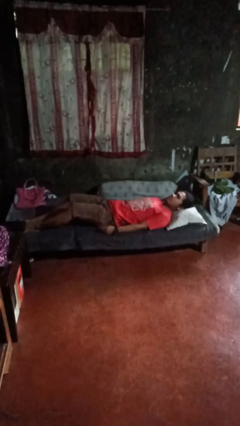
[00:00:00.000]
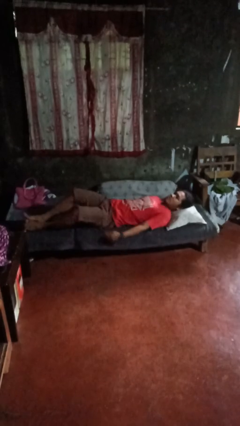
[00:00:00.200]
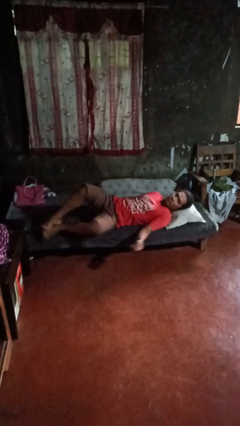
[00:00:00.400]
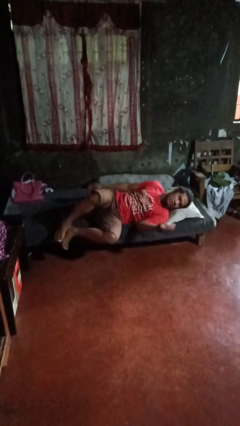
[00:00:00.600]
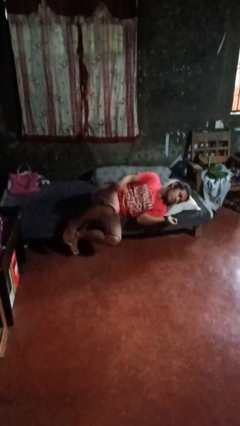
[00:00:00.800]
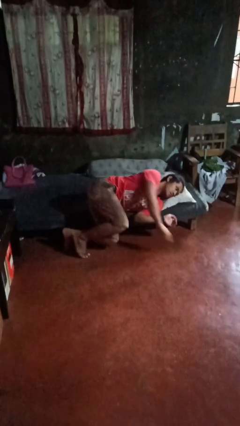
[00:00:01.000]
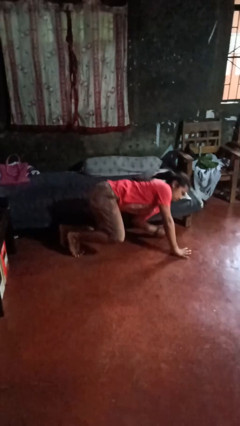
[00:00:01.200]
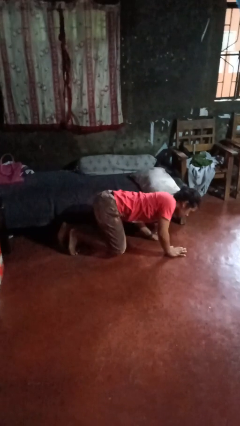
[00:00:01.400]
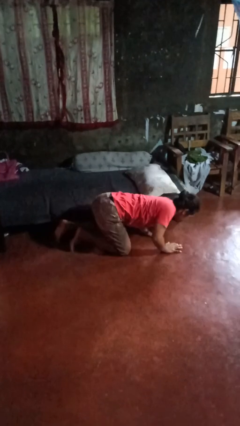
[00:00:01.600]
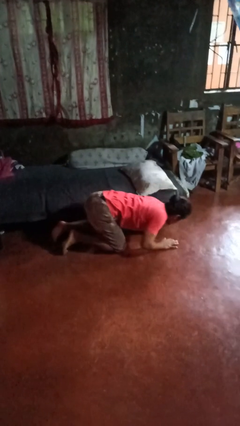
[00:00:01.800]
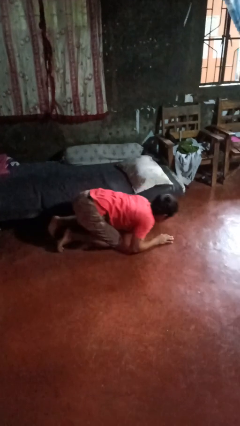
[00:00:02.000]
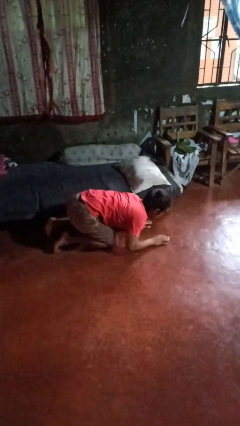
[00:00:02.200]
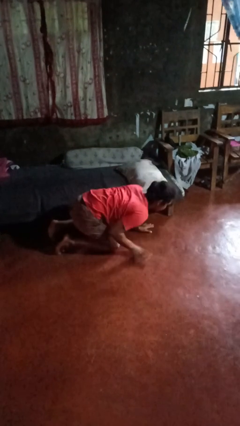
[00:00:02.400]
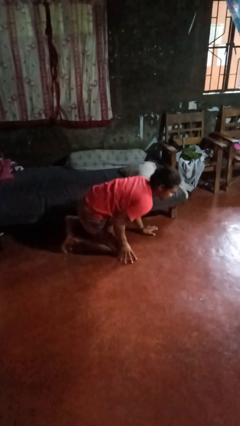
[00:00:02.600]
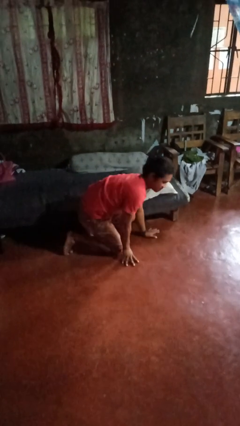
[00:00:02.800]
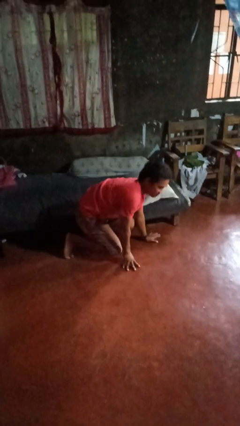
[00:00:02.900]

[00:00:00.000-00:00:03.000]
person falls from bed

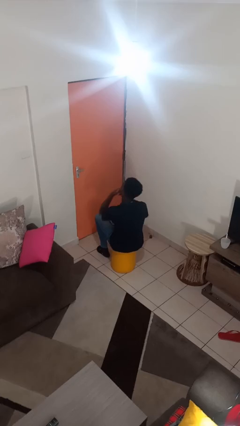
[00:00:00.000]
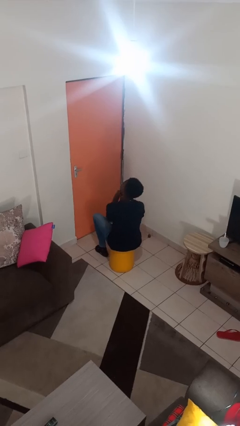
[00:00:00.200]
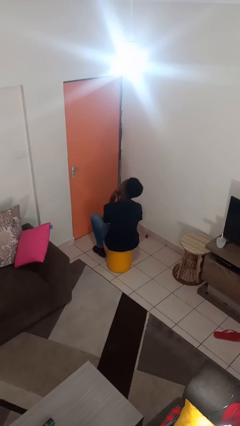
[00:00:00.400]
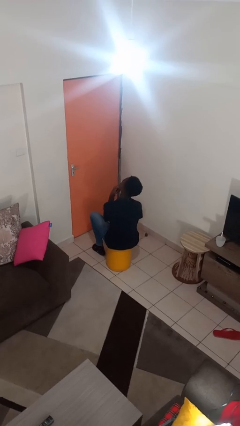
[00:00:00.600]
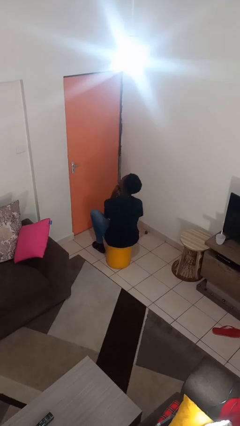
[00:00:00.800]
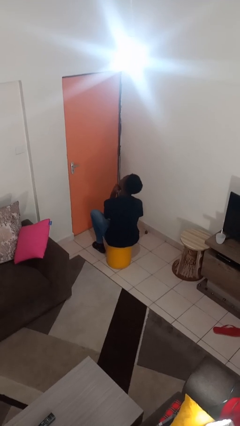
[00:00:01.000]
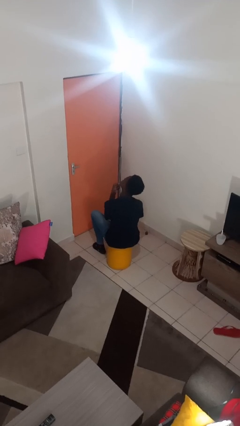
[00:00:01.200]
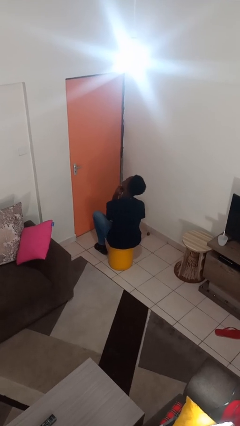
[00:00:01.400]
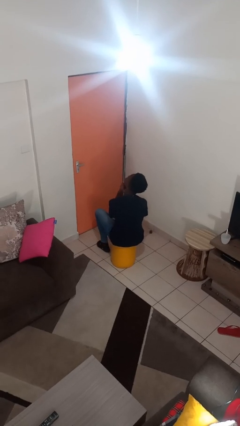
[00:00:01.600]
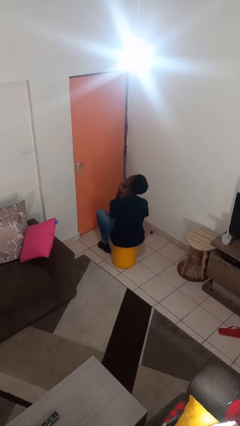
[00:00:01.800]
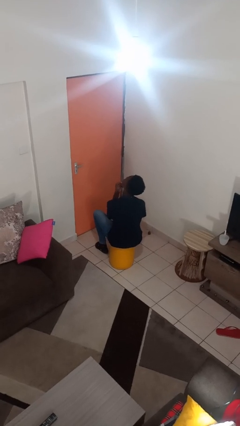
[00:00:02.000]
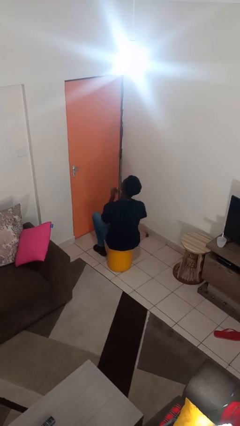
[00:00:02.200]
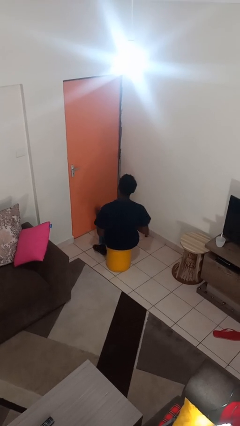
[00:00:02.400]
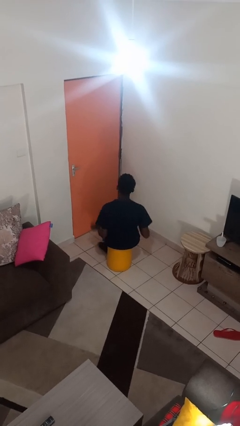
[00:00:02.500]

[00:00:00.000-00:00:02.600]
person strokes chin

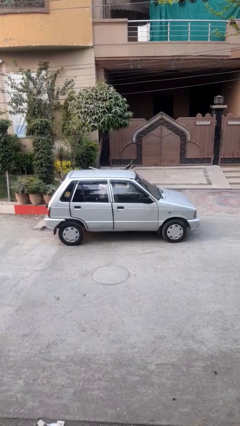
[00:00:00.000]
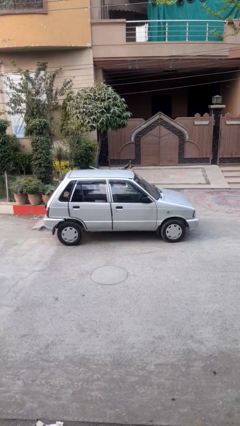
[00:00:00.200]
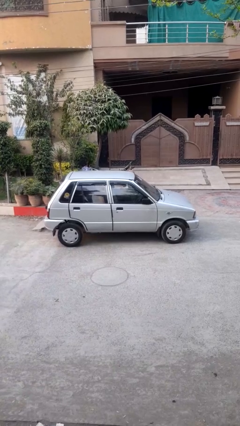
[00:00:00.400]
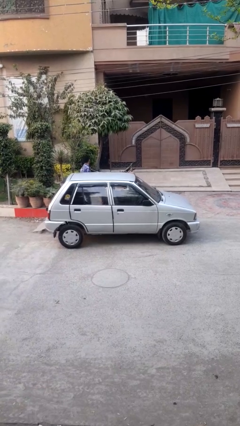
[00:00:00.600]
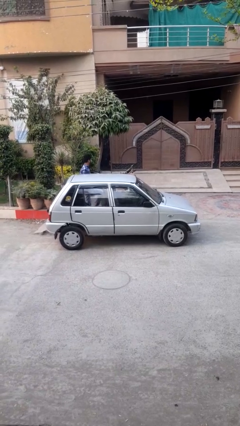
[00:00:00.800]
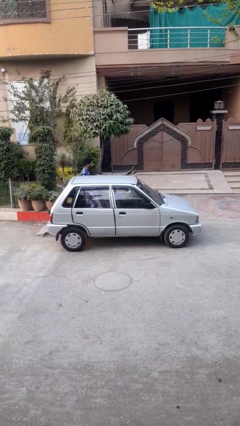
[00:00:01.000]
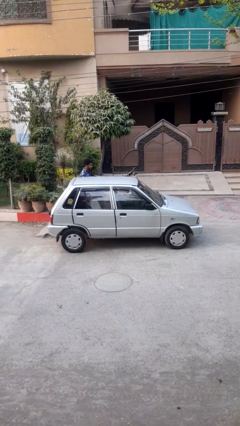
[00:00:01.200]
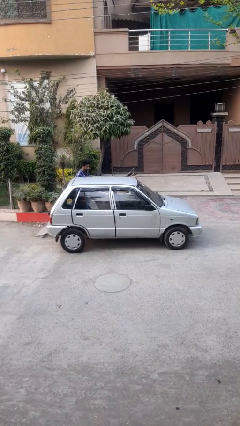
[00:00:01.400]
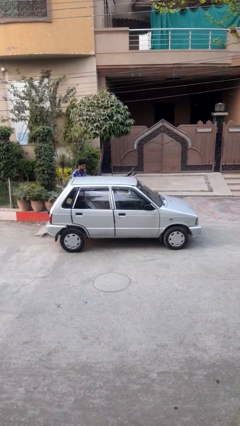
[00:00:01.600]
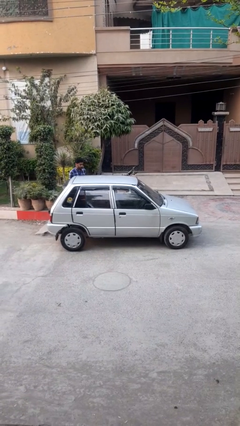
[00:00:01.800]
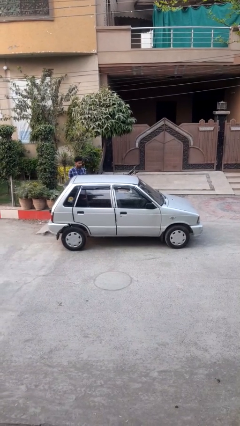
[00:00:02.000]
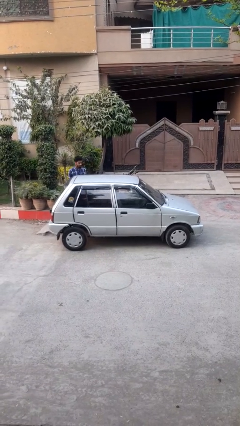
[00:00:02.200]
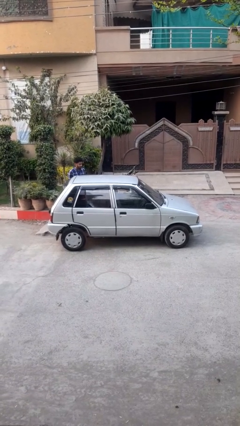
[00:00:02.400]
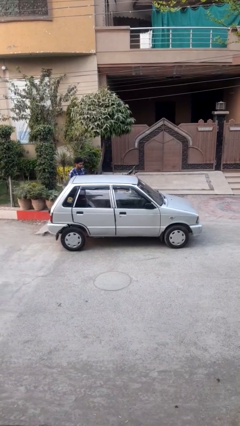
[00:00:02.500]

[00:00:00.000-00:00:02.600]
car drops off person

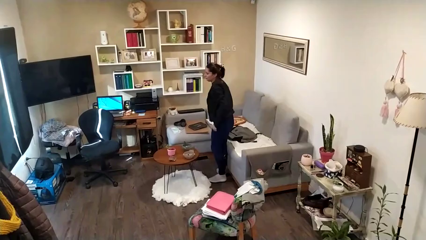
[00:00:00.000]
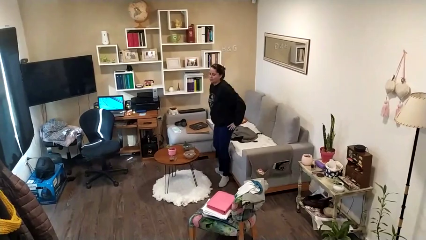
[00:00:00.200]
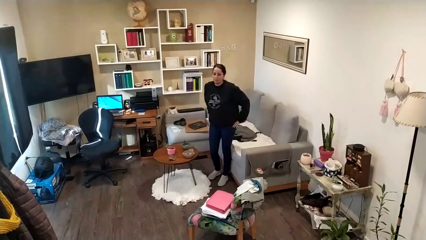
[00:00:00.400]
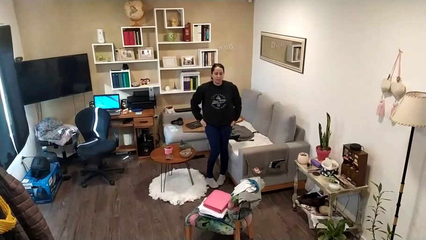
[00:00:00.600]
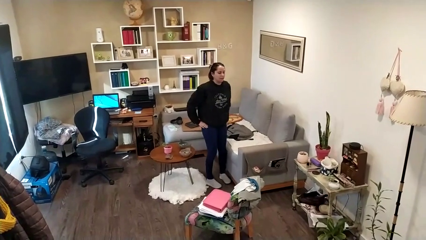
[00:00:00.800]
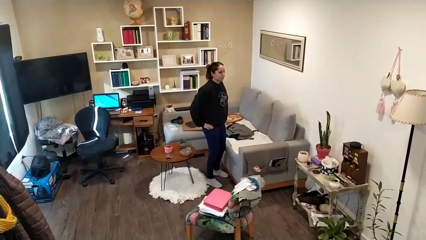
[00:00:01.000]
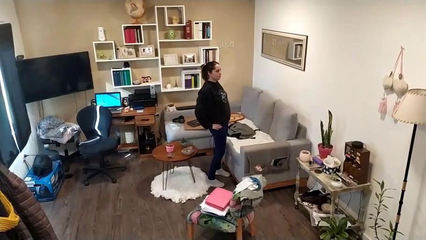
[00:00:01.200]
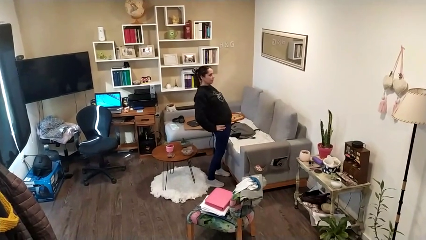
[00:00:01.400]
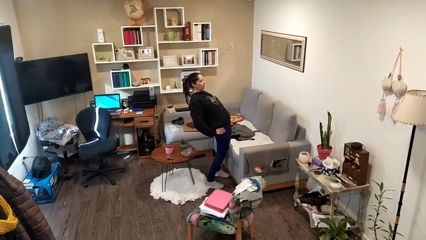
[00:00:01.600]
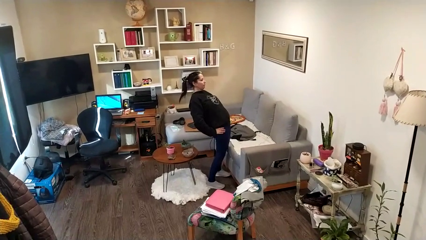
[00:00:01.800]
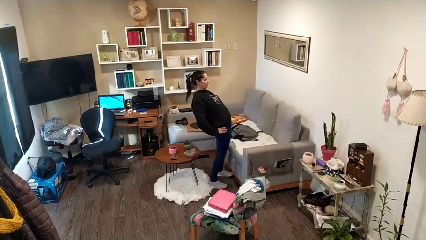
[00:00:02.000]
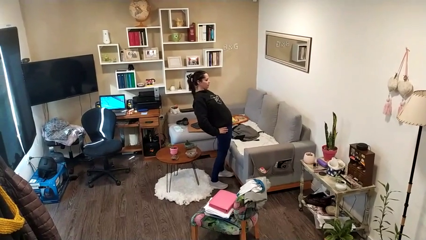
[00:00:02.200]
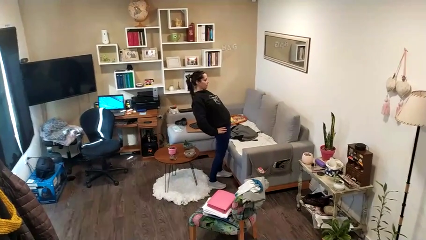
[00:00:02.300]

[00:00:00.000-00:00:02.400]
person stretches back

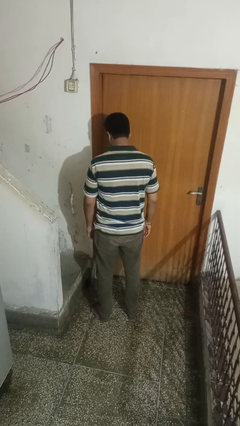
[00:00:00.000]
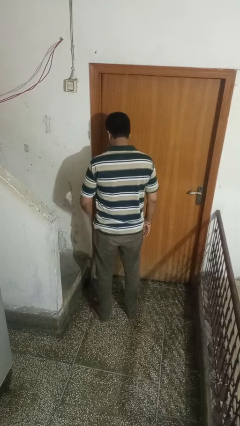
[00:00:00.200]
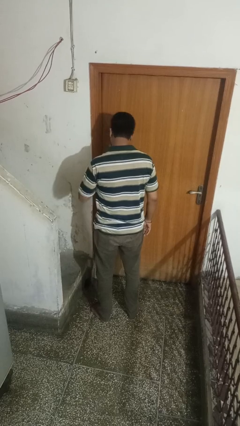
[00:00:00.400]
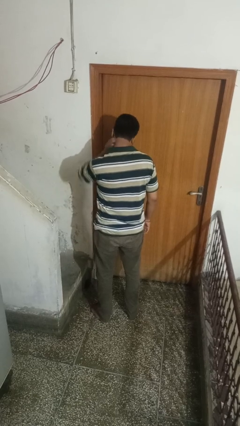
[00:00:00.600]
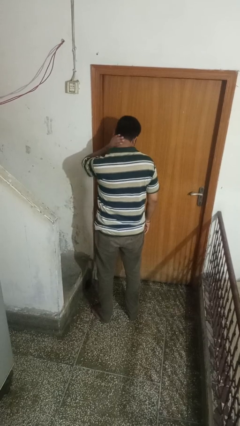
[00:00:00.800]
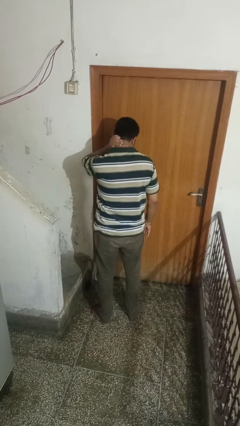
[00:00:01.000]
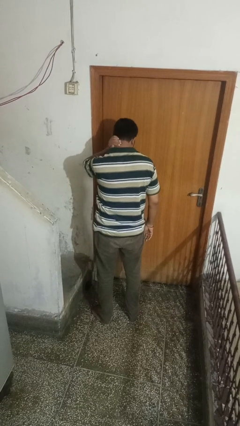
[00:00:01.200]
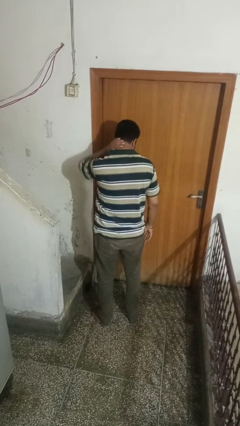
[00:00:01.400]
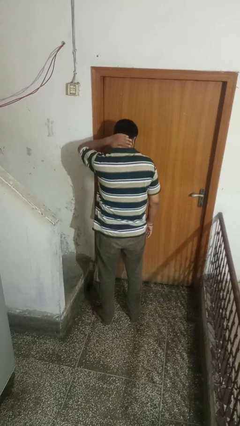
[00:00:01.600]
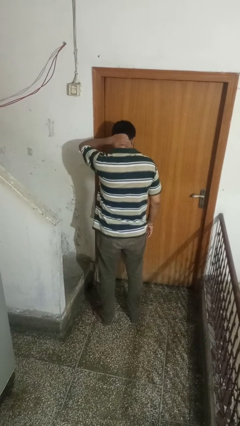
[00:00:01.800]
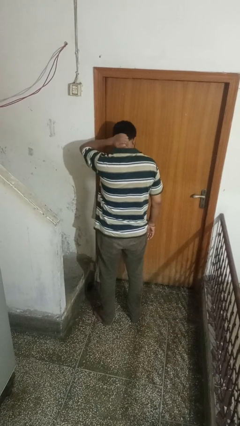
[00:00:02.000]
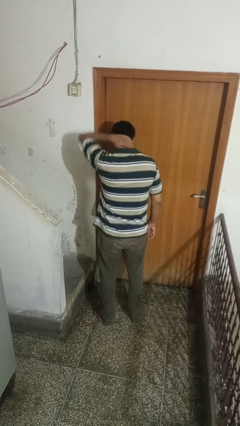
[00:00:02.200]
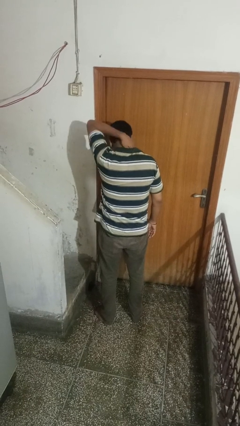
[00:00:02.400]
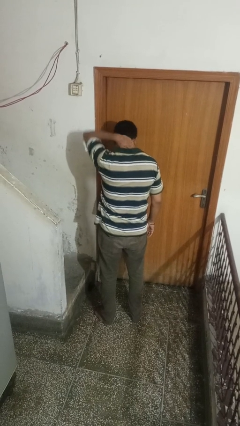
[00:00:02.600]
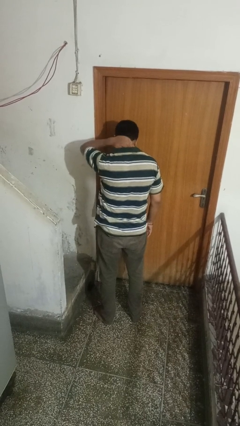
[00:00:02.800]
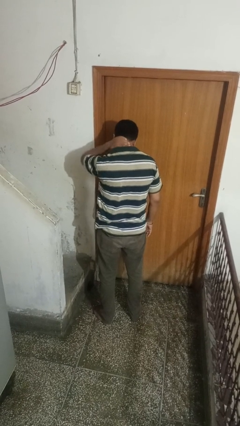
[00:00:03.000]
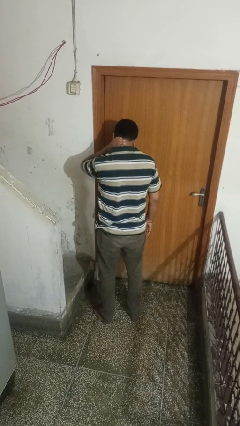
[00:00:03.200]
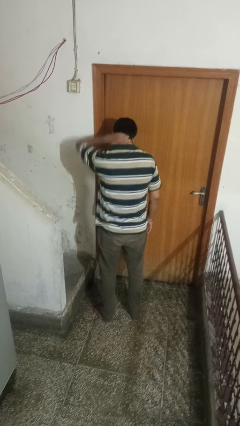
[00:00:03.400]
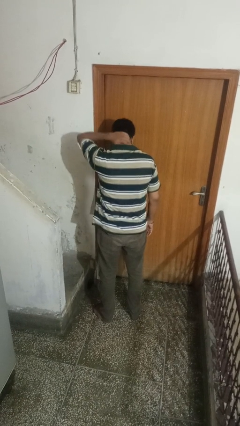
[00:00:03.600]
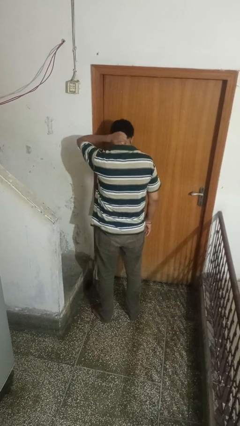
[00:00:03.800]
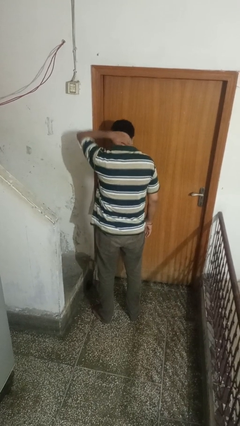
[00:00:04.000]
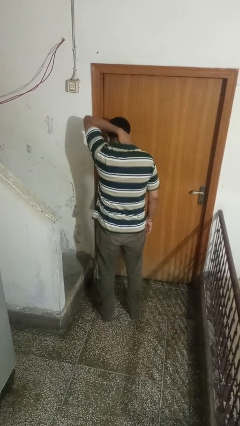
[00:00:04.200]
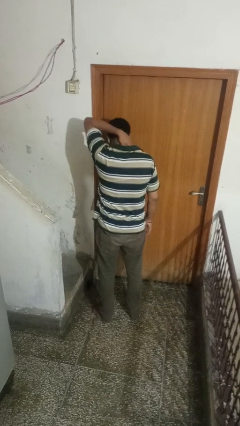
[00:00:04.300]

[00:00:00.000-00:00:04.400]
person rubs neck

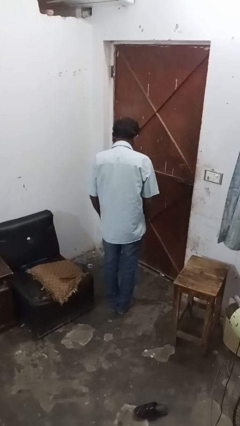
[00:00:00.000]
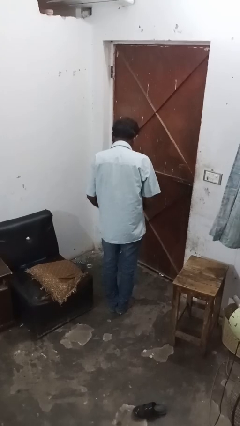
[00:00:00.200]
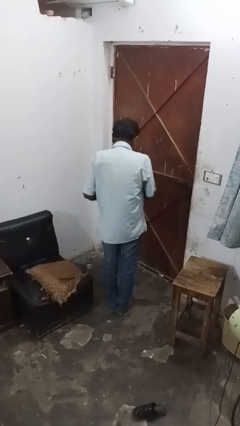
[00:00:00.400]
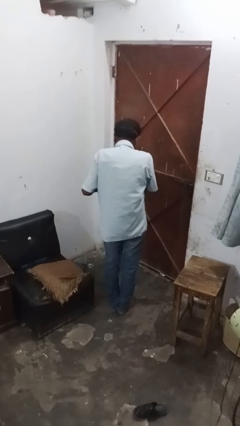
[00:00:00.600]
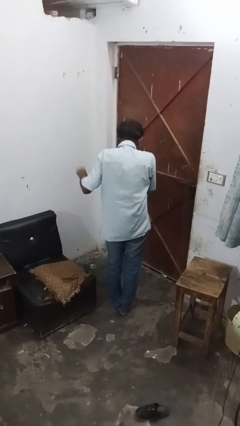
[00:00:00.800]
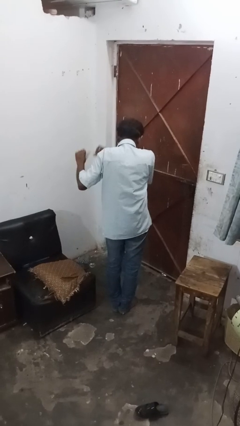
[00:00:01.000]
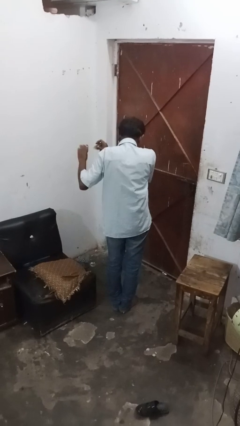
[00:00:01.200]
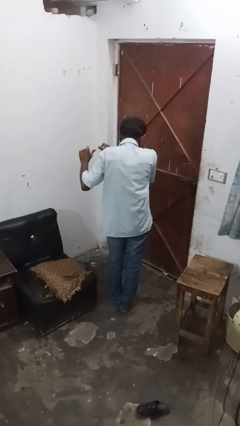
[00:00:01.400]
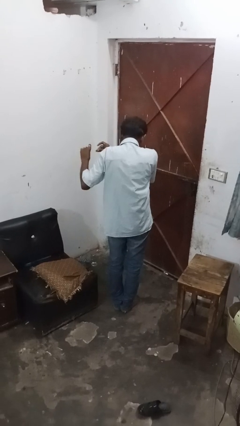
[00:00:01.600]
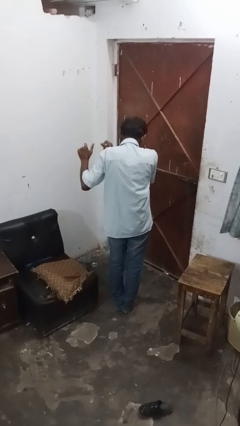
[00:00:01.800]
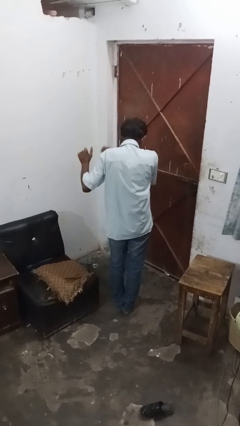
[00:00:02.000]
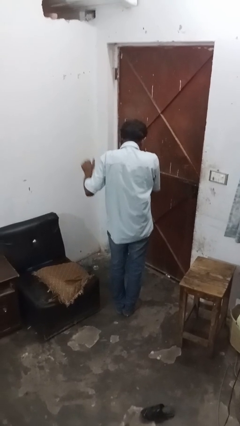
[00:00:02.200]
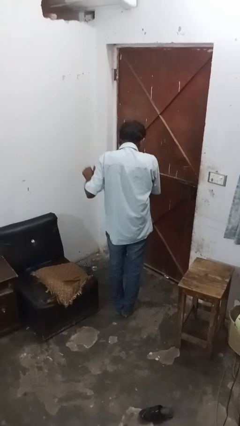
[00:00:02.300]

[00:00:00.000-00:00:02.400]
person snaps fingers
